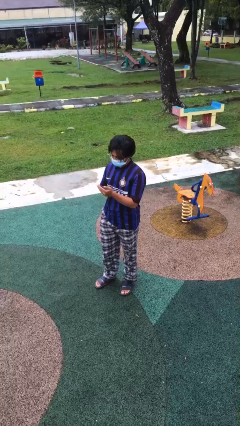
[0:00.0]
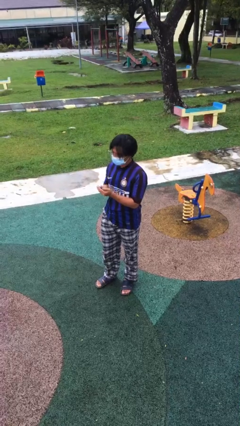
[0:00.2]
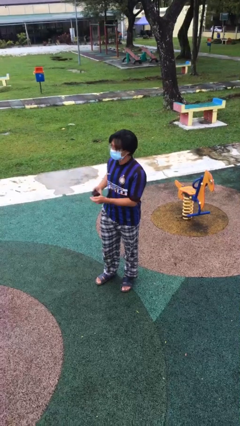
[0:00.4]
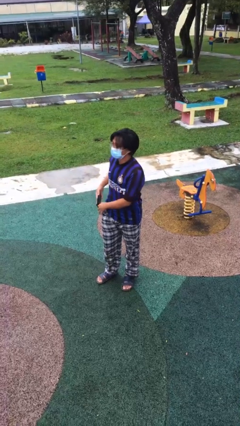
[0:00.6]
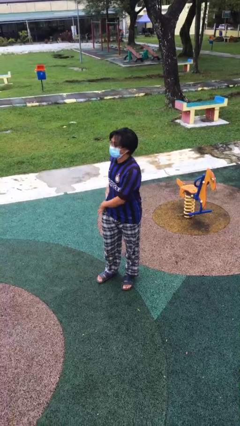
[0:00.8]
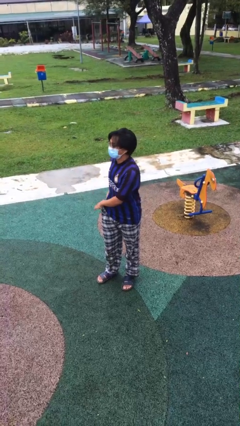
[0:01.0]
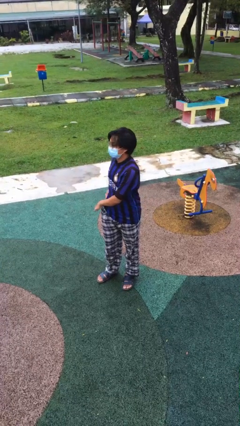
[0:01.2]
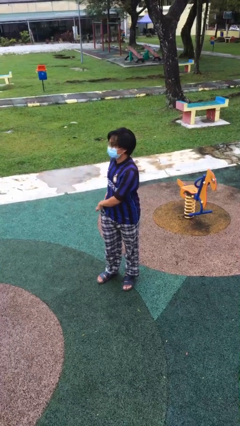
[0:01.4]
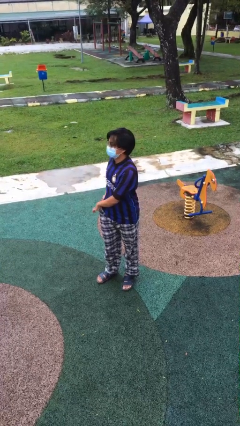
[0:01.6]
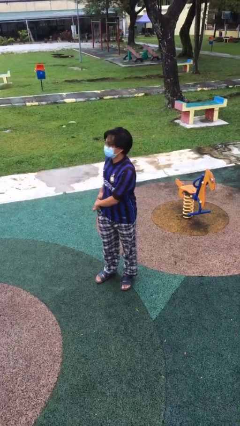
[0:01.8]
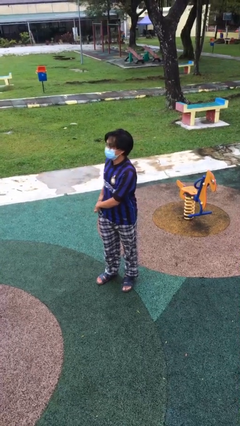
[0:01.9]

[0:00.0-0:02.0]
person puts phone into pocket

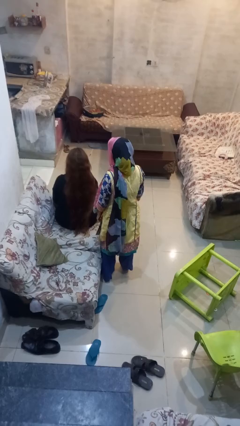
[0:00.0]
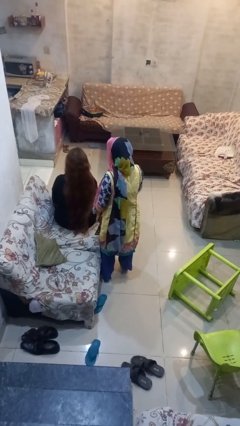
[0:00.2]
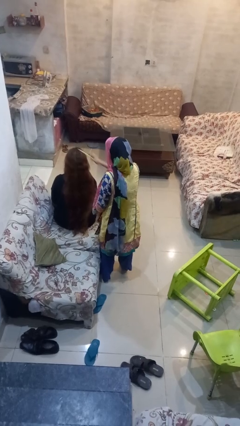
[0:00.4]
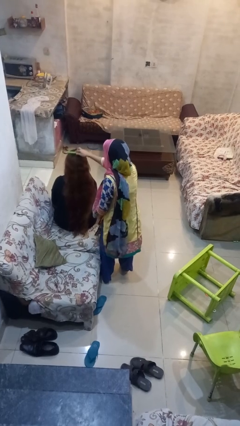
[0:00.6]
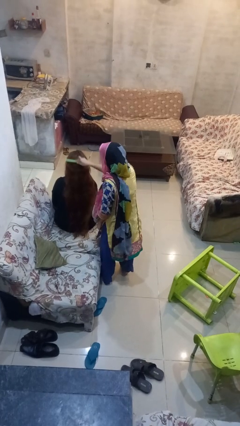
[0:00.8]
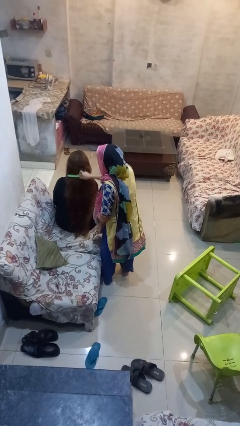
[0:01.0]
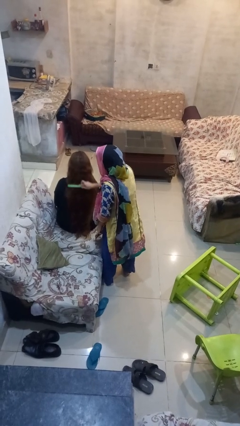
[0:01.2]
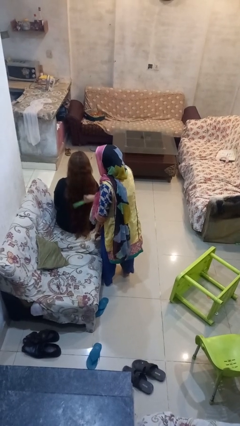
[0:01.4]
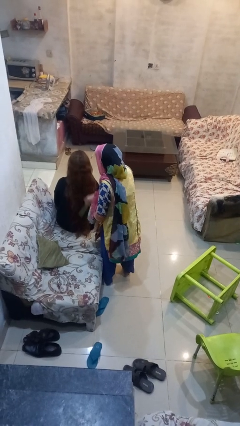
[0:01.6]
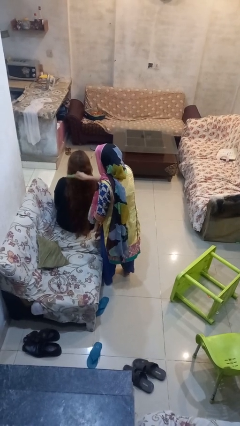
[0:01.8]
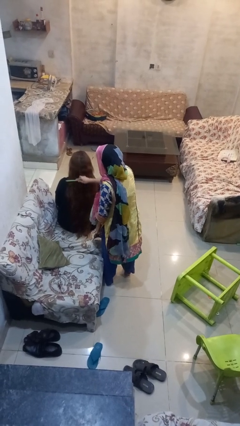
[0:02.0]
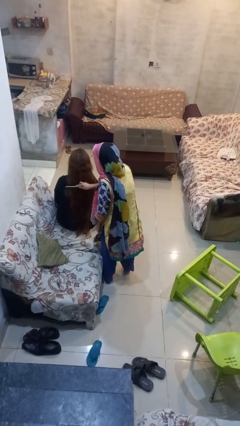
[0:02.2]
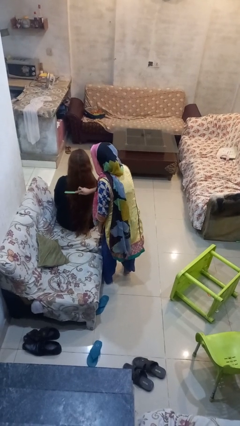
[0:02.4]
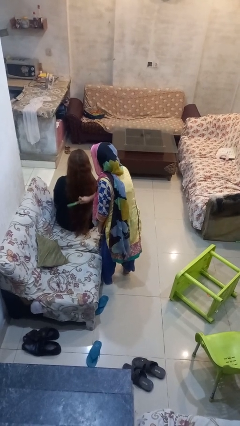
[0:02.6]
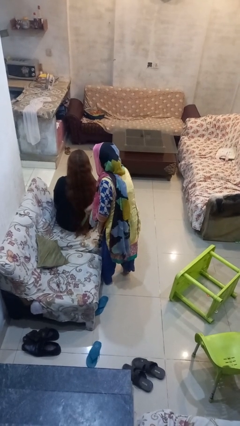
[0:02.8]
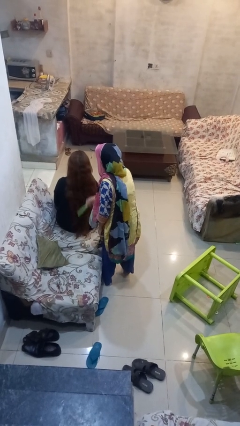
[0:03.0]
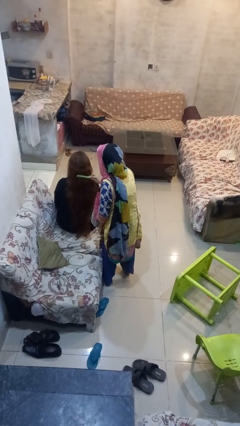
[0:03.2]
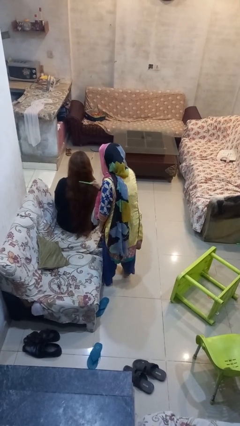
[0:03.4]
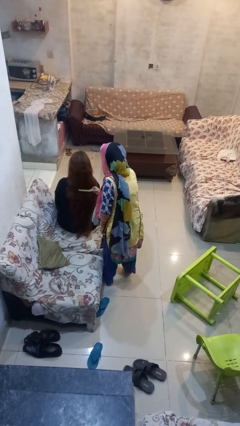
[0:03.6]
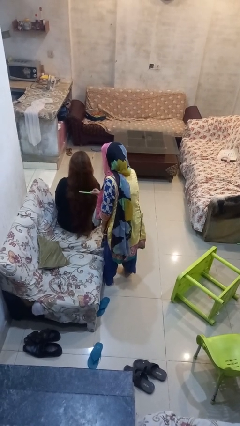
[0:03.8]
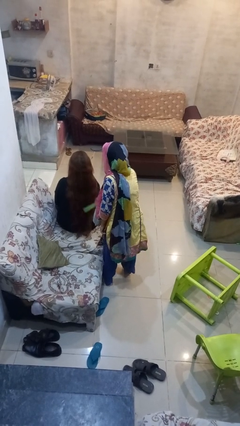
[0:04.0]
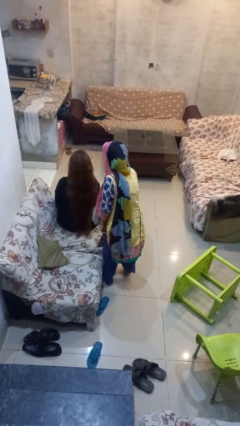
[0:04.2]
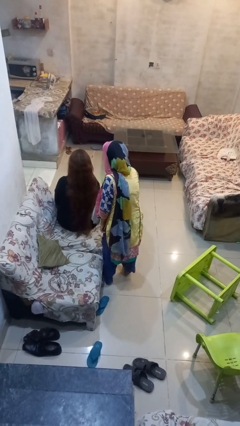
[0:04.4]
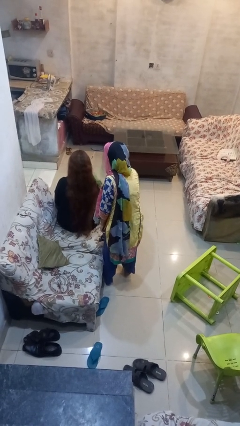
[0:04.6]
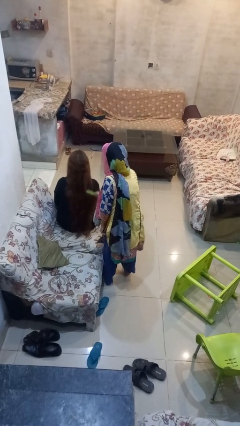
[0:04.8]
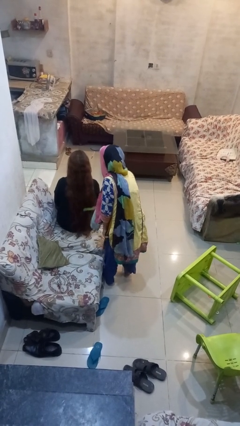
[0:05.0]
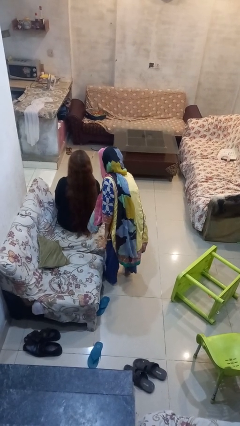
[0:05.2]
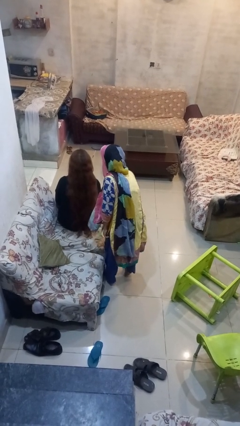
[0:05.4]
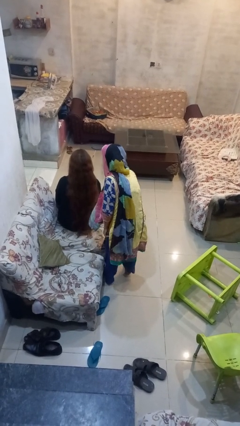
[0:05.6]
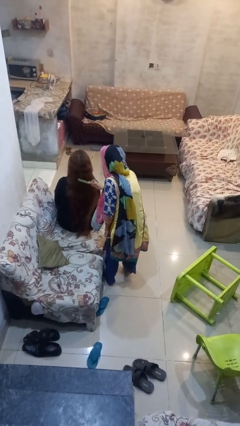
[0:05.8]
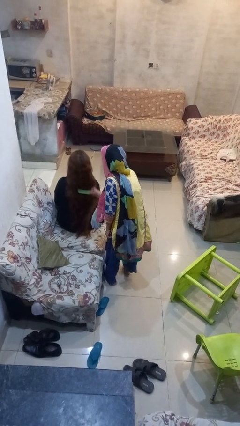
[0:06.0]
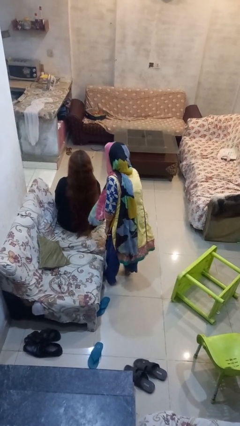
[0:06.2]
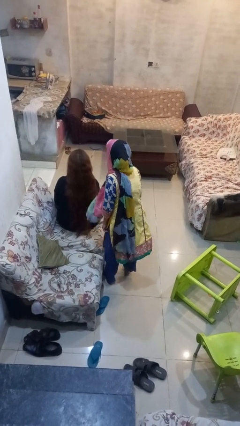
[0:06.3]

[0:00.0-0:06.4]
person brushes hair of person

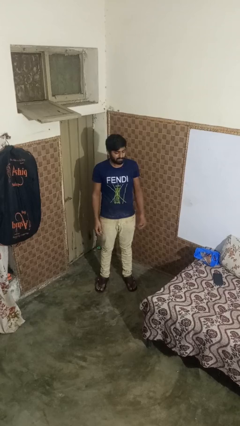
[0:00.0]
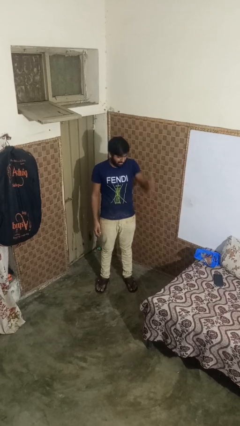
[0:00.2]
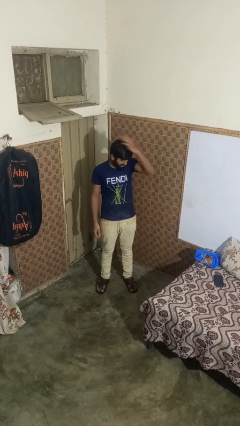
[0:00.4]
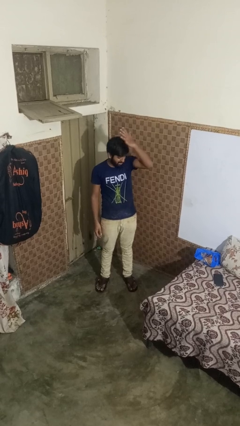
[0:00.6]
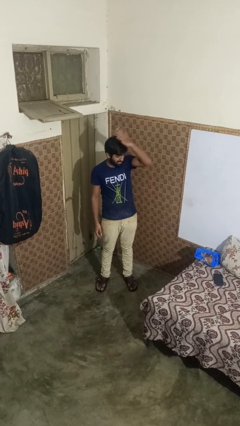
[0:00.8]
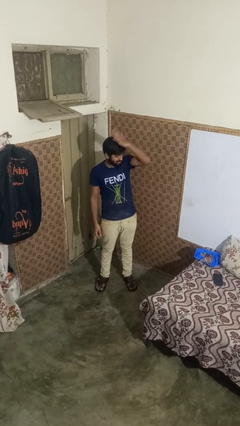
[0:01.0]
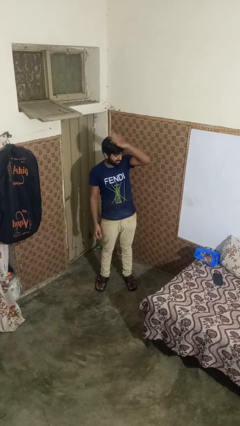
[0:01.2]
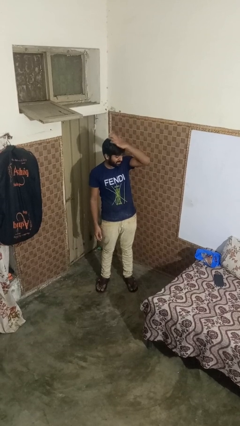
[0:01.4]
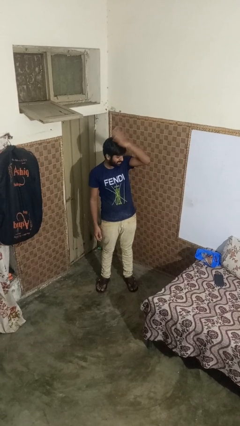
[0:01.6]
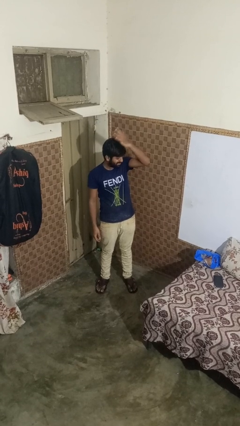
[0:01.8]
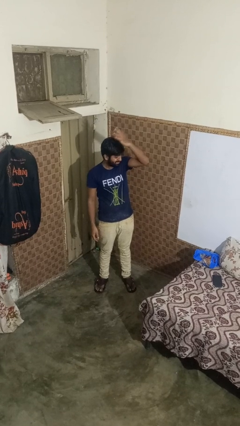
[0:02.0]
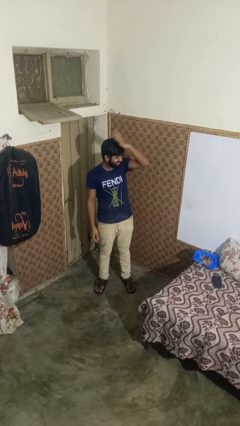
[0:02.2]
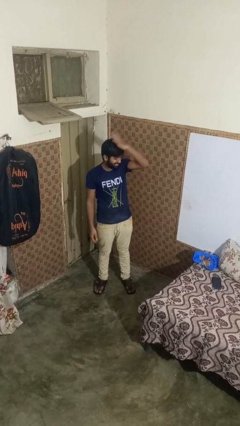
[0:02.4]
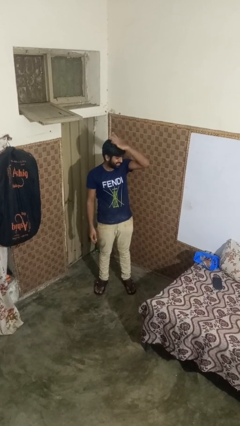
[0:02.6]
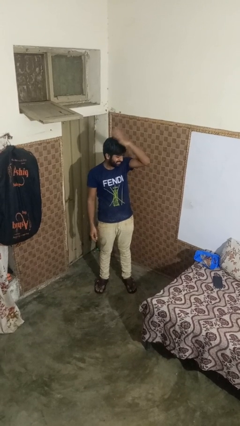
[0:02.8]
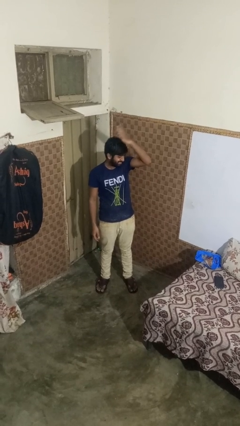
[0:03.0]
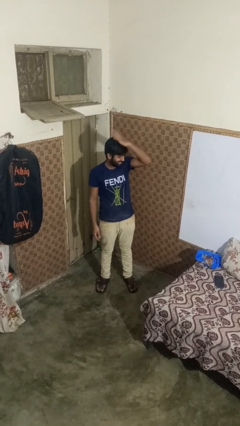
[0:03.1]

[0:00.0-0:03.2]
person pats head

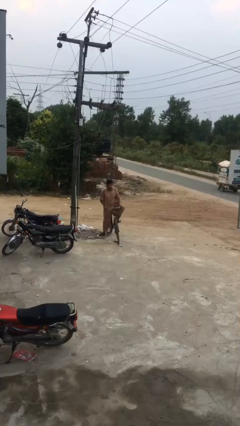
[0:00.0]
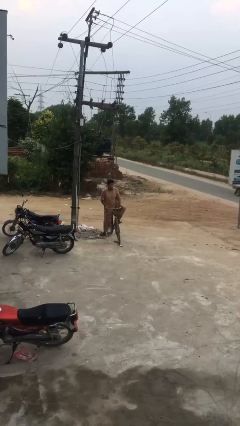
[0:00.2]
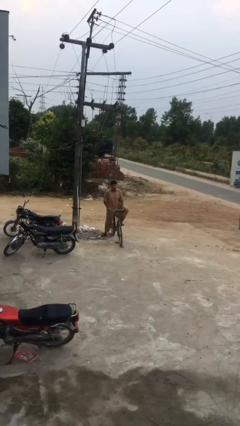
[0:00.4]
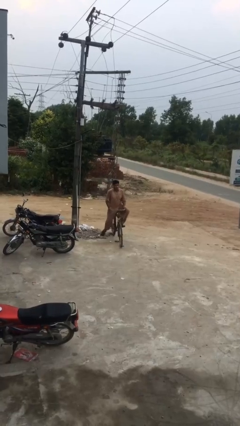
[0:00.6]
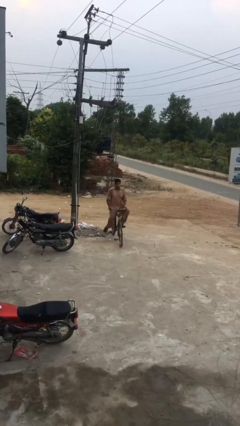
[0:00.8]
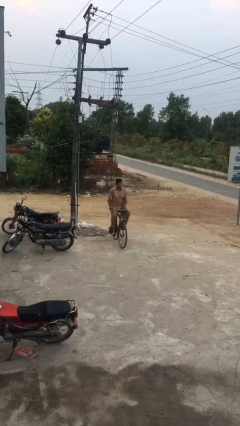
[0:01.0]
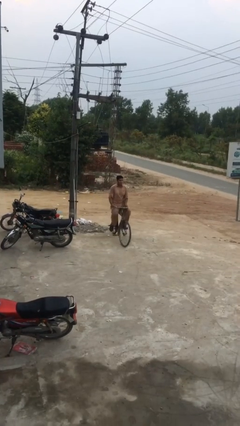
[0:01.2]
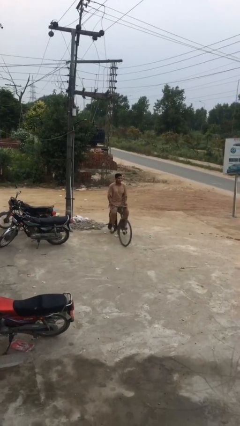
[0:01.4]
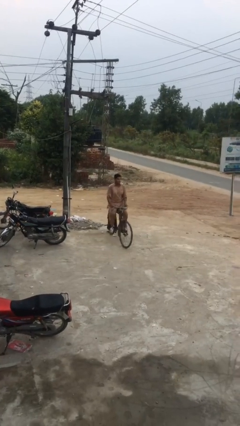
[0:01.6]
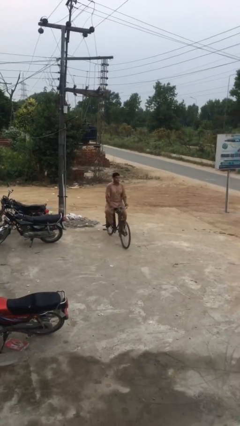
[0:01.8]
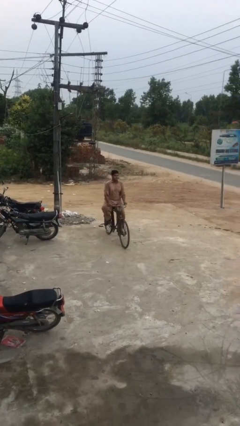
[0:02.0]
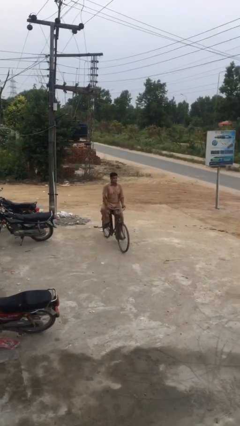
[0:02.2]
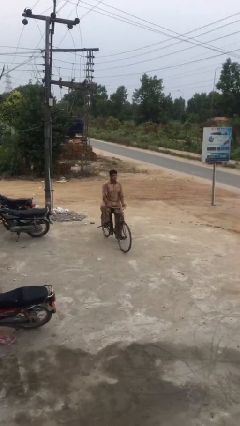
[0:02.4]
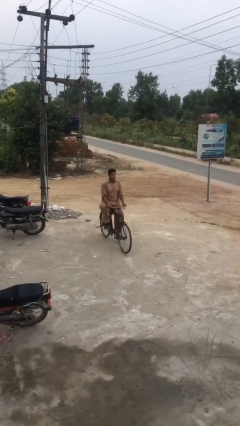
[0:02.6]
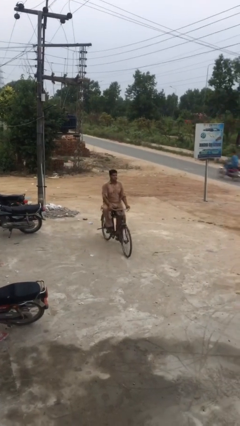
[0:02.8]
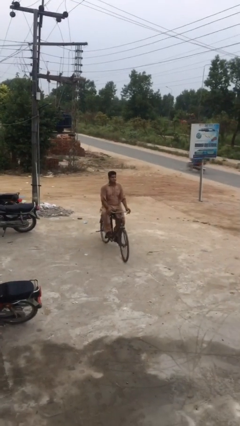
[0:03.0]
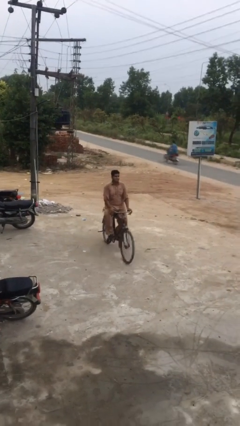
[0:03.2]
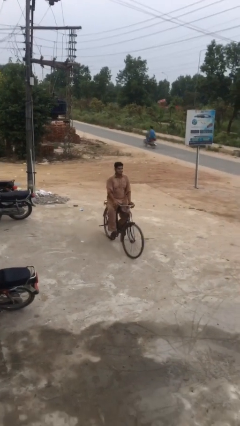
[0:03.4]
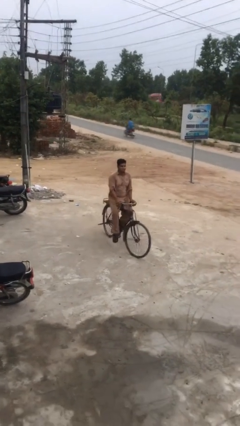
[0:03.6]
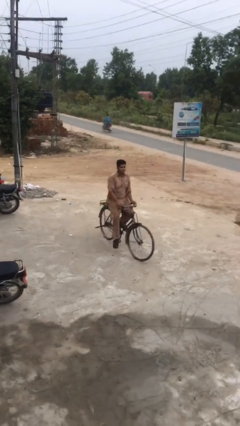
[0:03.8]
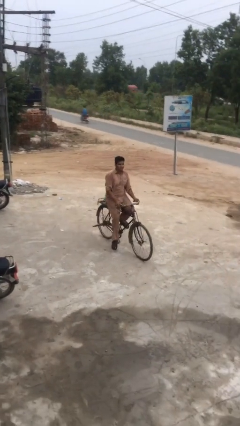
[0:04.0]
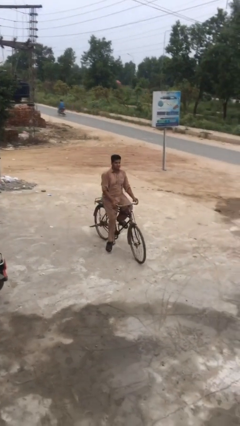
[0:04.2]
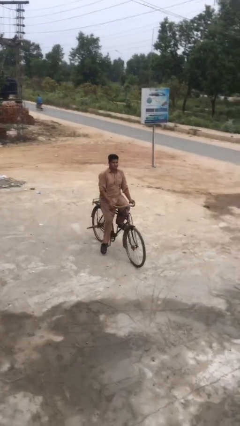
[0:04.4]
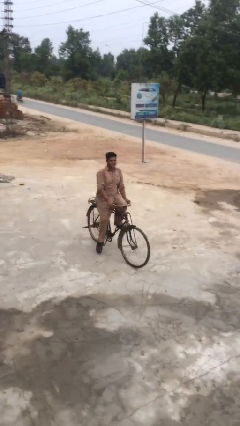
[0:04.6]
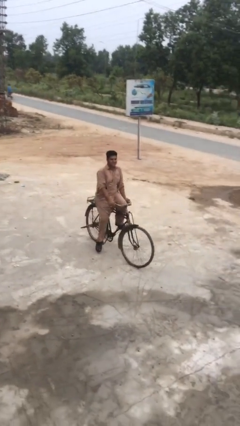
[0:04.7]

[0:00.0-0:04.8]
person rides bicycle

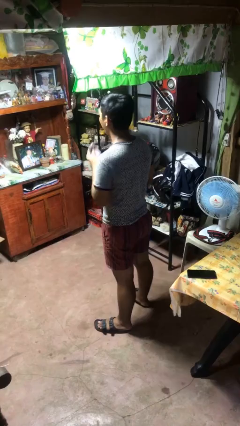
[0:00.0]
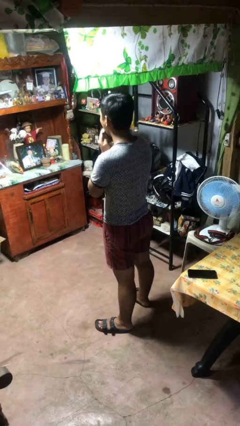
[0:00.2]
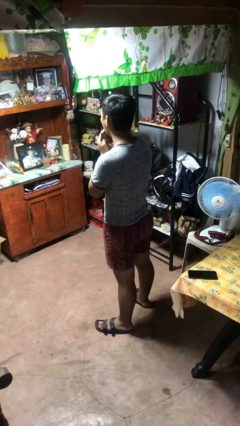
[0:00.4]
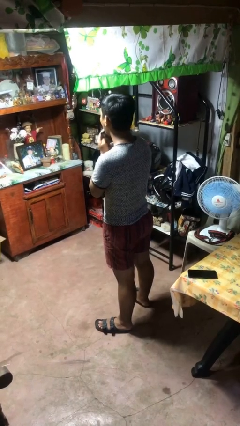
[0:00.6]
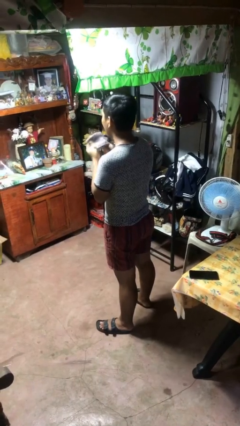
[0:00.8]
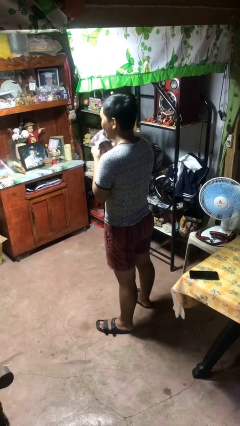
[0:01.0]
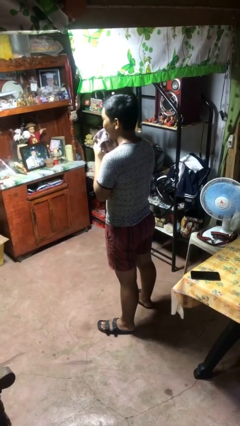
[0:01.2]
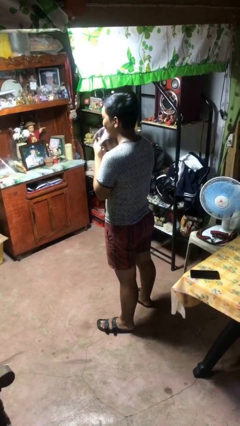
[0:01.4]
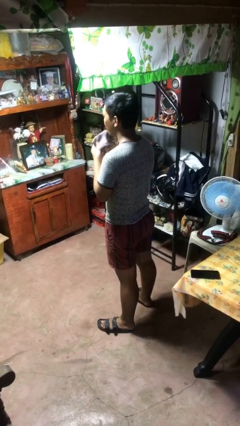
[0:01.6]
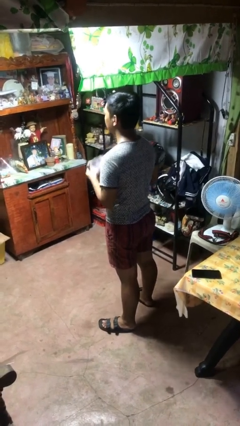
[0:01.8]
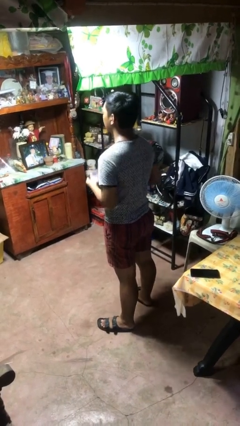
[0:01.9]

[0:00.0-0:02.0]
person wipes mouth with napkin
